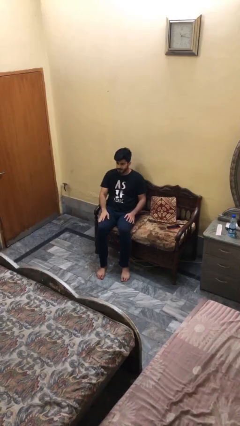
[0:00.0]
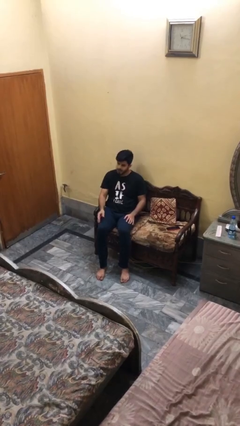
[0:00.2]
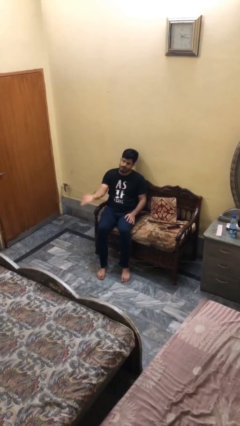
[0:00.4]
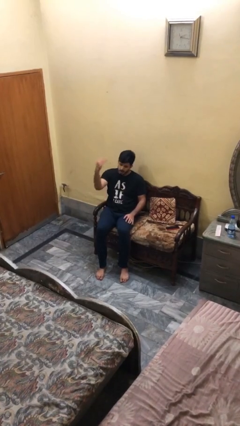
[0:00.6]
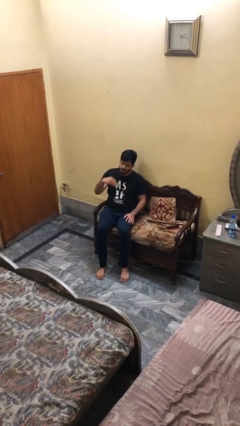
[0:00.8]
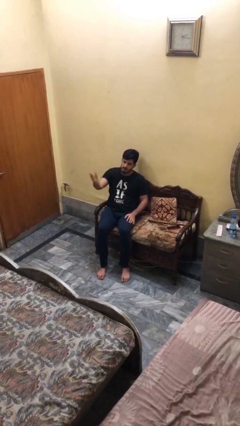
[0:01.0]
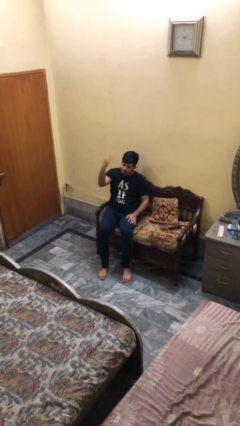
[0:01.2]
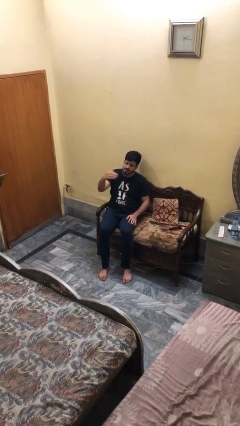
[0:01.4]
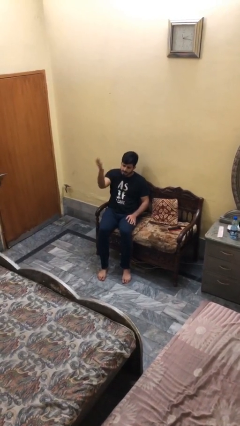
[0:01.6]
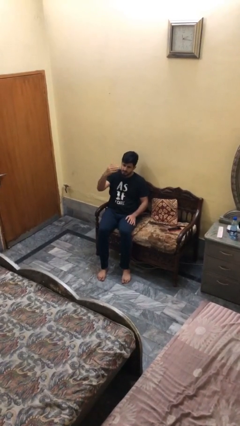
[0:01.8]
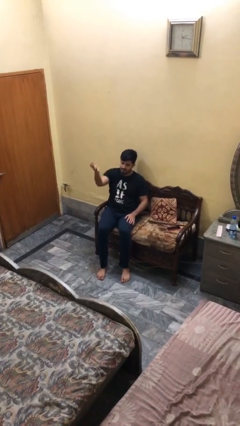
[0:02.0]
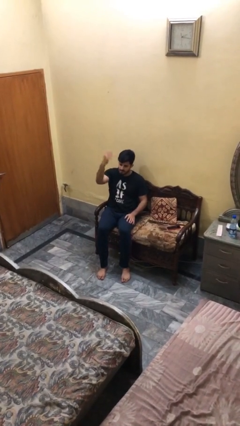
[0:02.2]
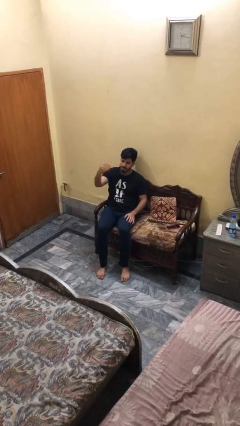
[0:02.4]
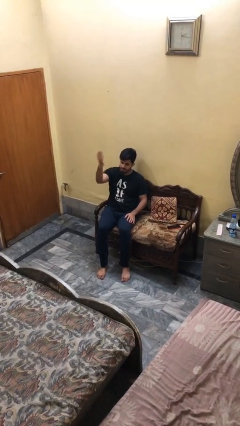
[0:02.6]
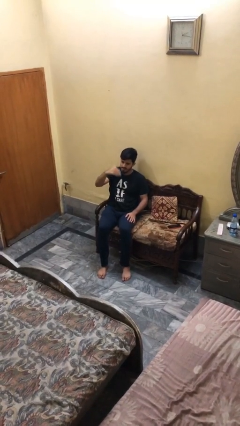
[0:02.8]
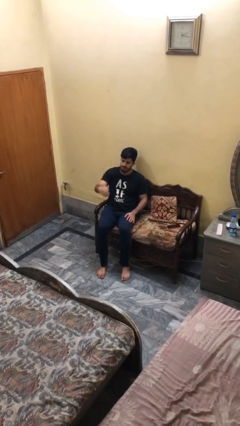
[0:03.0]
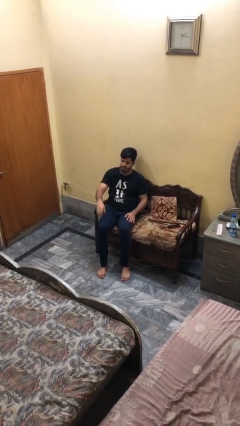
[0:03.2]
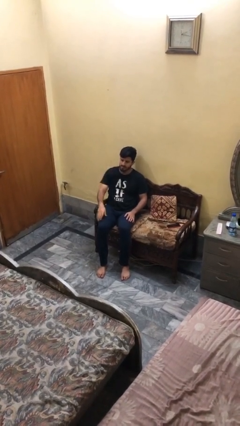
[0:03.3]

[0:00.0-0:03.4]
person gestures come here

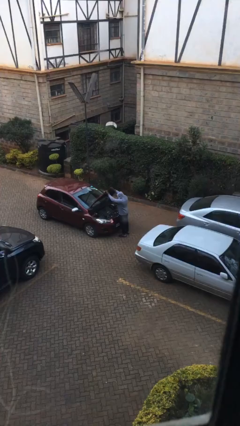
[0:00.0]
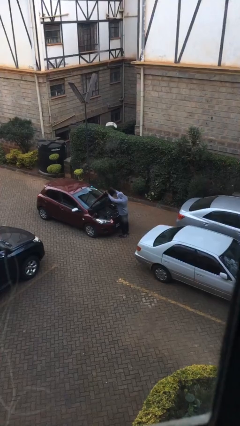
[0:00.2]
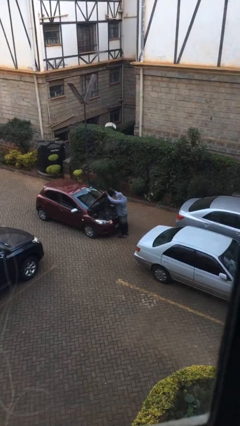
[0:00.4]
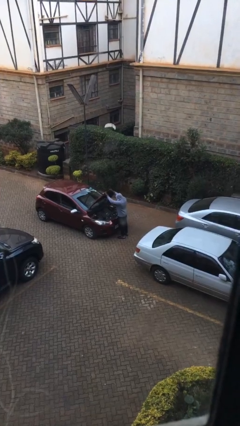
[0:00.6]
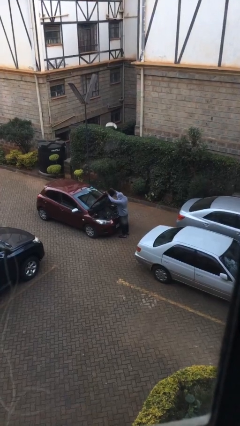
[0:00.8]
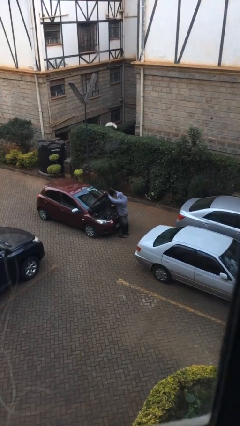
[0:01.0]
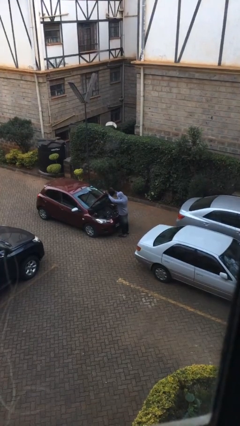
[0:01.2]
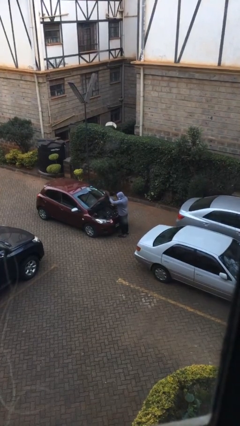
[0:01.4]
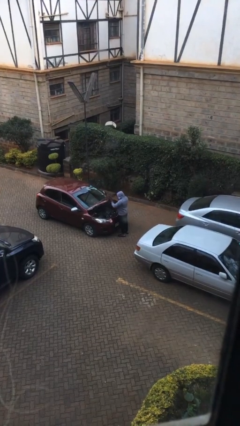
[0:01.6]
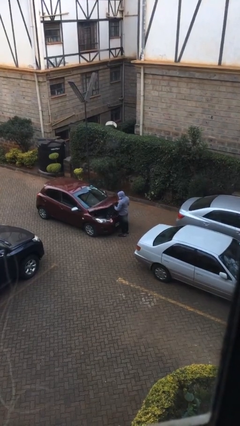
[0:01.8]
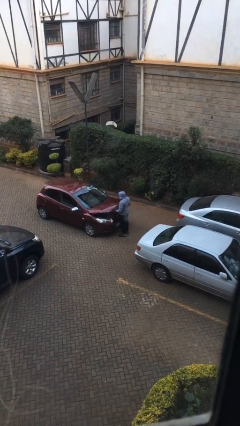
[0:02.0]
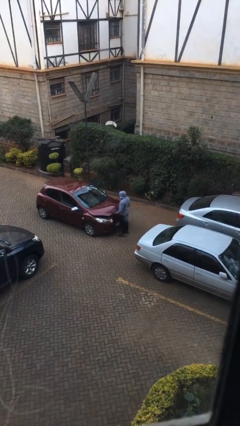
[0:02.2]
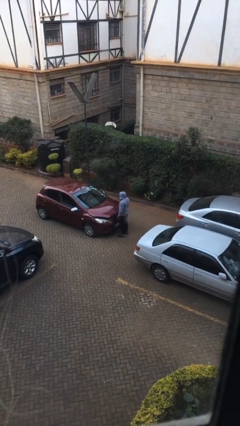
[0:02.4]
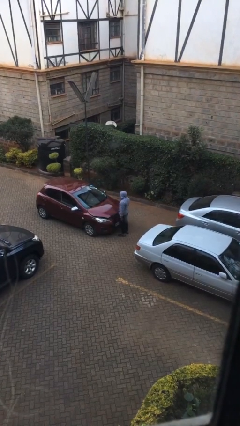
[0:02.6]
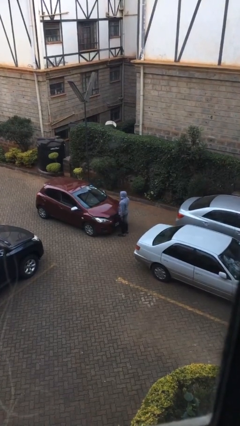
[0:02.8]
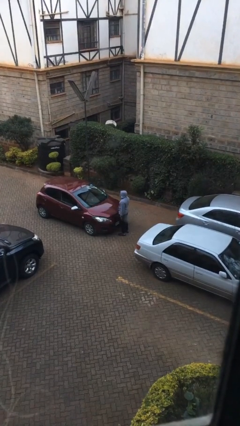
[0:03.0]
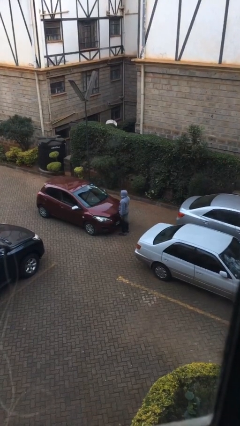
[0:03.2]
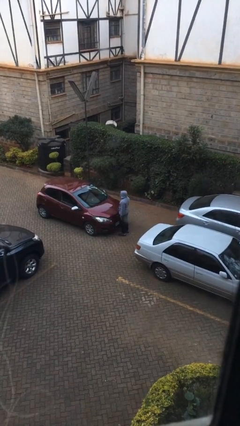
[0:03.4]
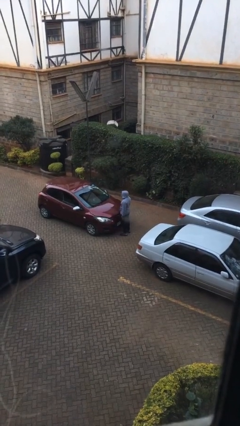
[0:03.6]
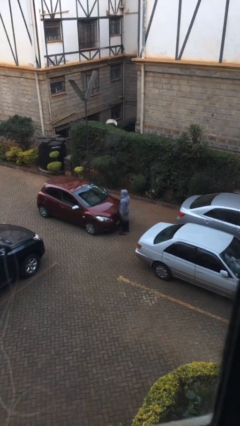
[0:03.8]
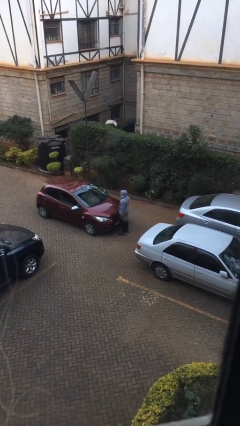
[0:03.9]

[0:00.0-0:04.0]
person closes car hood

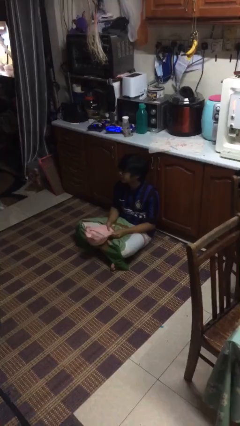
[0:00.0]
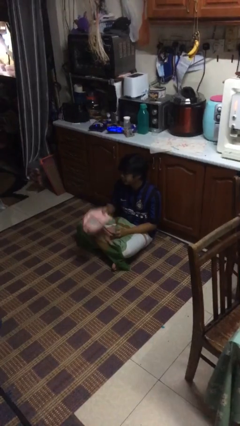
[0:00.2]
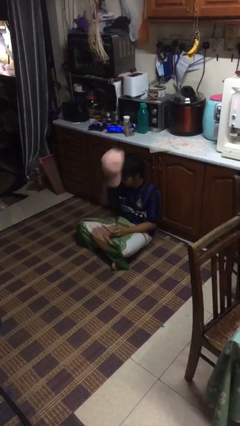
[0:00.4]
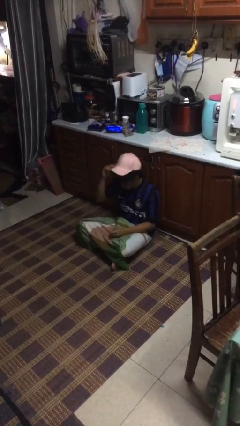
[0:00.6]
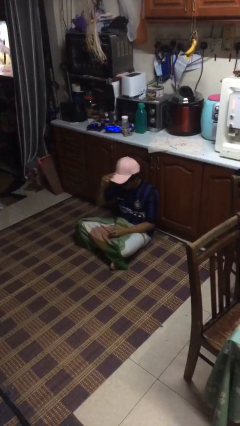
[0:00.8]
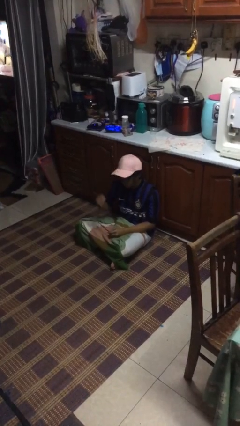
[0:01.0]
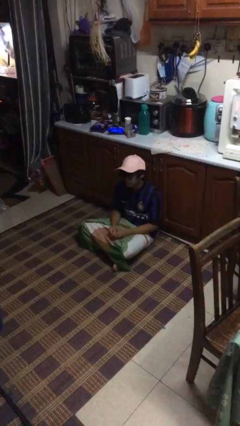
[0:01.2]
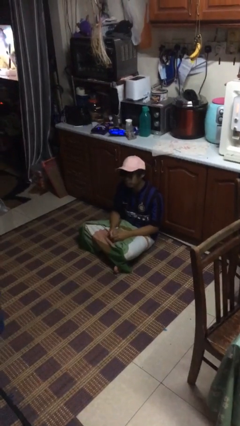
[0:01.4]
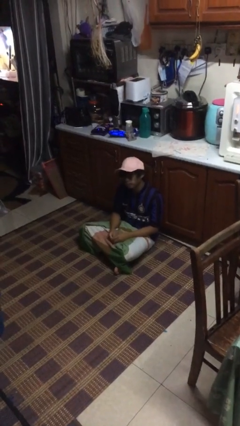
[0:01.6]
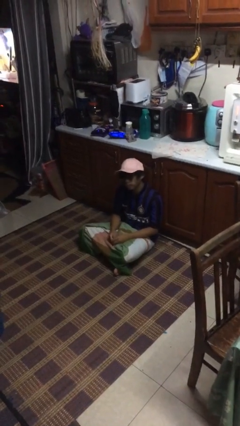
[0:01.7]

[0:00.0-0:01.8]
person puts on hat

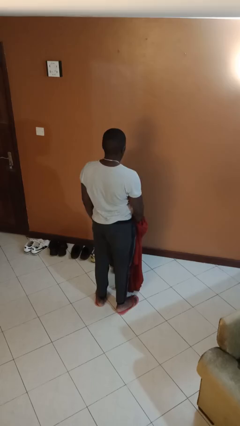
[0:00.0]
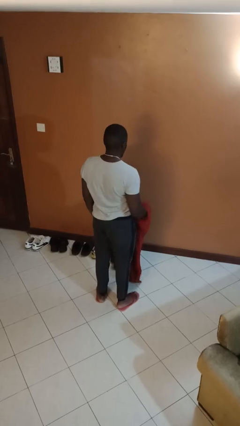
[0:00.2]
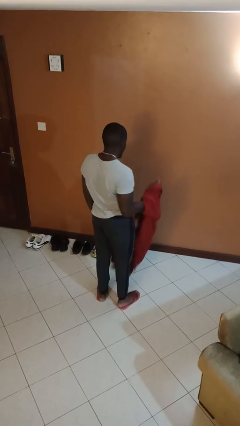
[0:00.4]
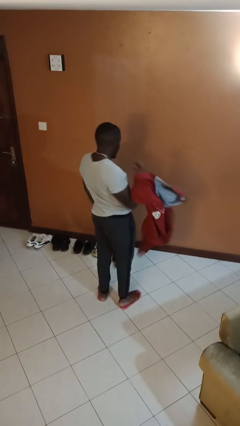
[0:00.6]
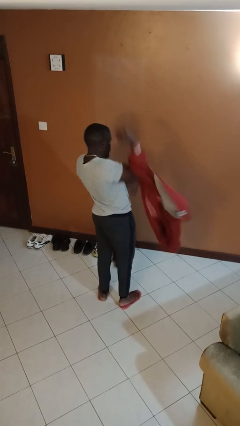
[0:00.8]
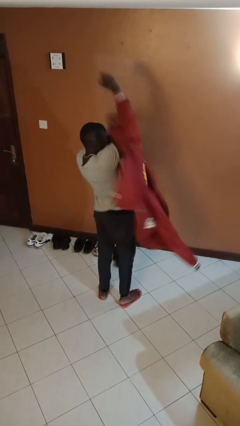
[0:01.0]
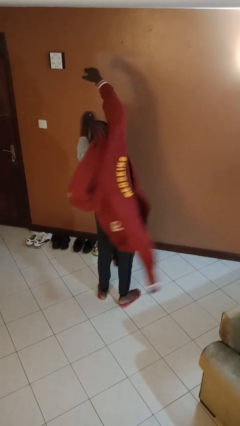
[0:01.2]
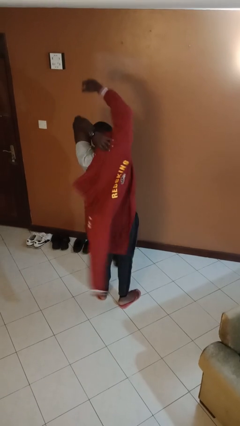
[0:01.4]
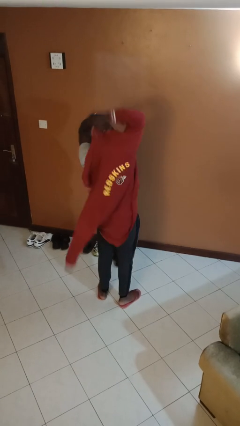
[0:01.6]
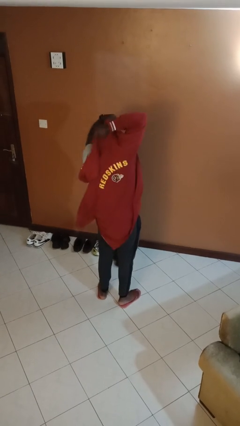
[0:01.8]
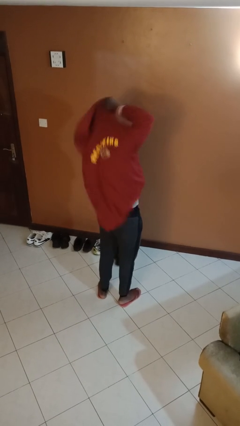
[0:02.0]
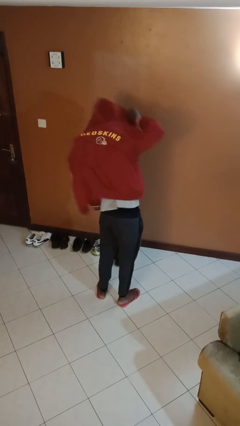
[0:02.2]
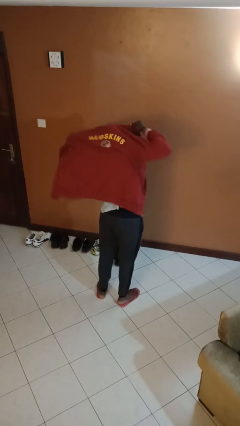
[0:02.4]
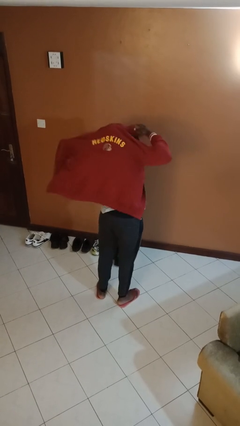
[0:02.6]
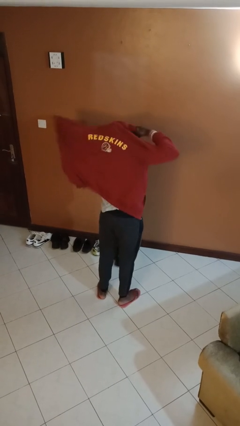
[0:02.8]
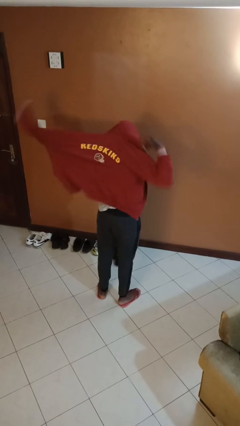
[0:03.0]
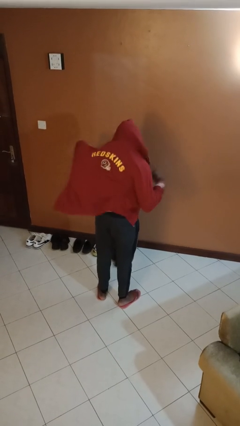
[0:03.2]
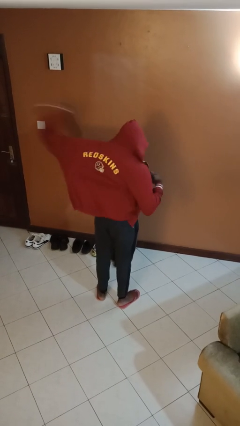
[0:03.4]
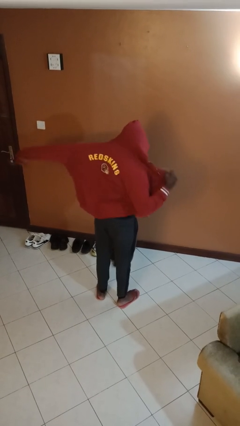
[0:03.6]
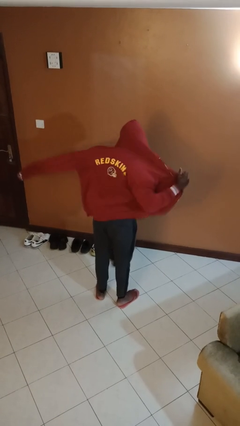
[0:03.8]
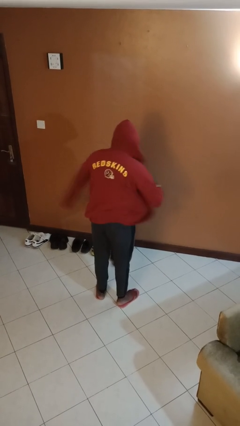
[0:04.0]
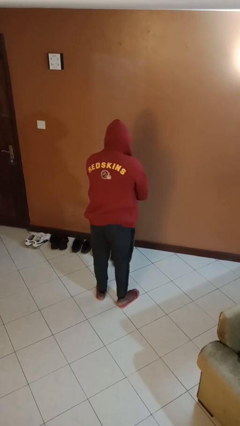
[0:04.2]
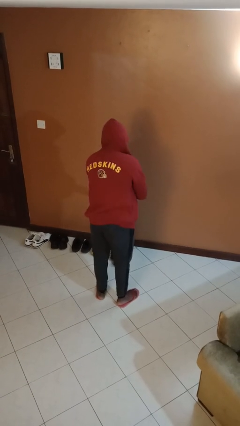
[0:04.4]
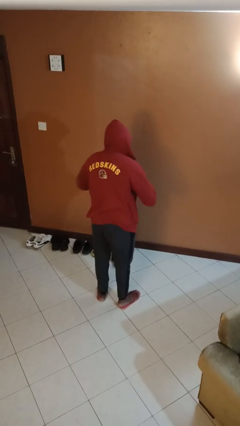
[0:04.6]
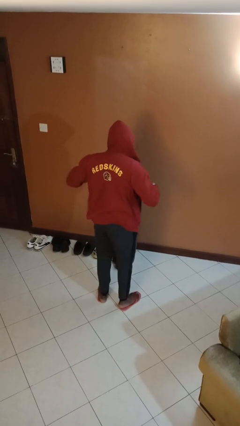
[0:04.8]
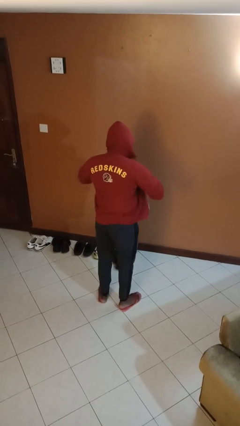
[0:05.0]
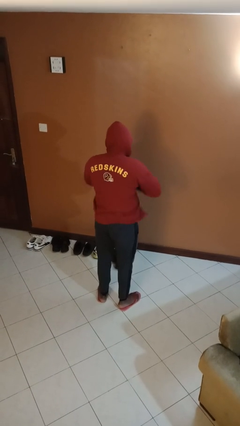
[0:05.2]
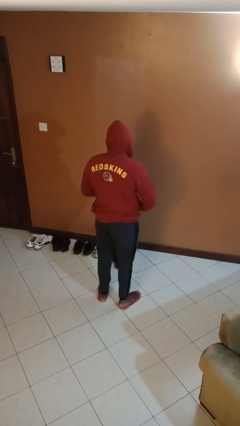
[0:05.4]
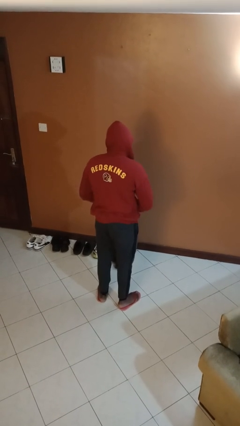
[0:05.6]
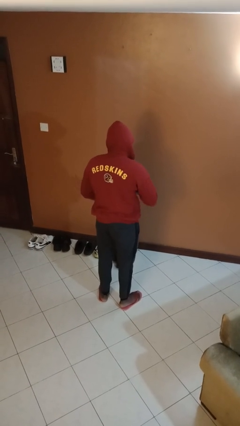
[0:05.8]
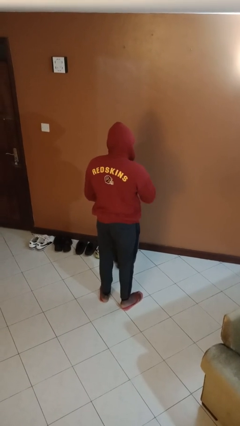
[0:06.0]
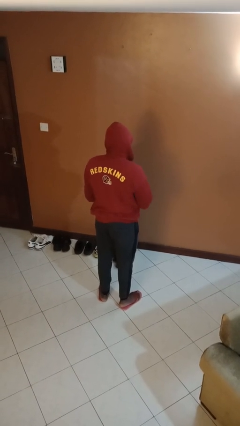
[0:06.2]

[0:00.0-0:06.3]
person puts on hoodie

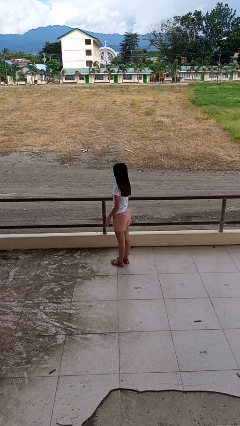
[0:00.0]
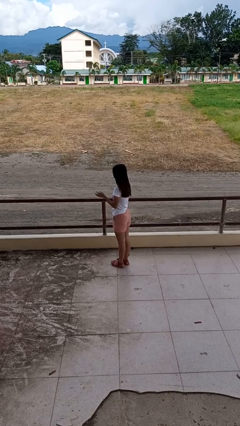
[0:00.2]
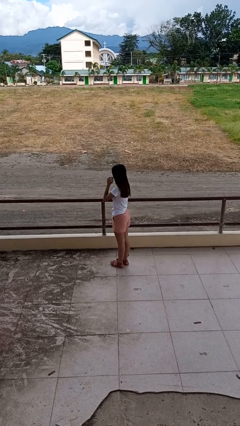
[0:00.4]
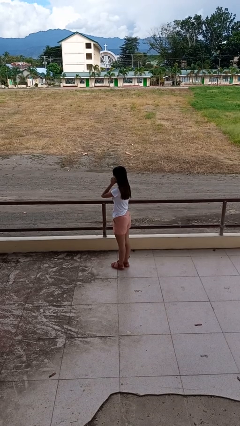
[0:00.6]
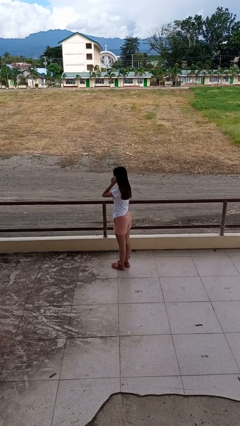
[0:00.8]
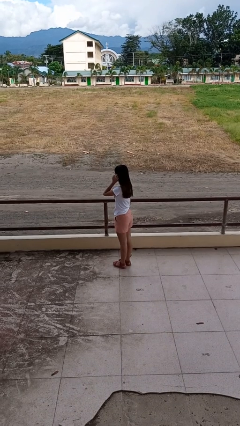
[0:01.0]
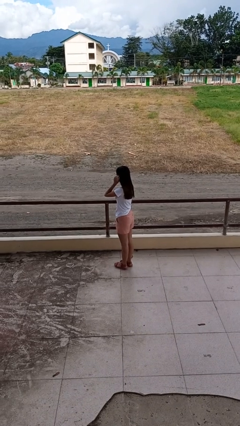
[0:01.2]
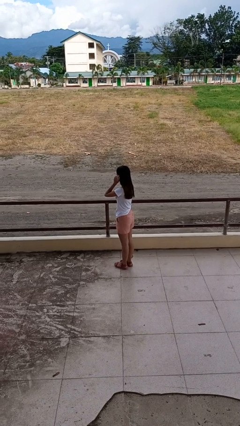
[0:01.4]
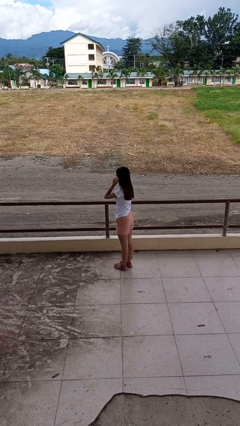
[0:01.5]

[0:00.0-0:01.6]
person touches earlobe

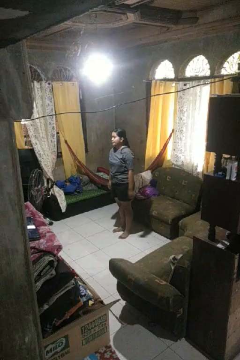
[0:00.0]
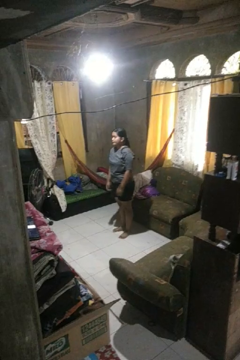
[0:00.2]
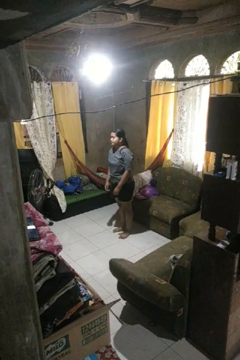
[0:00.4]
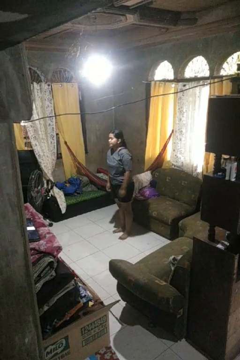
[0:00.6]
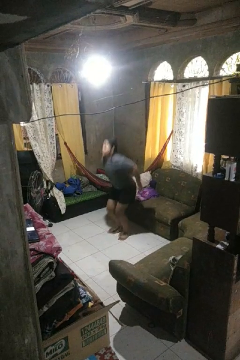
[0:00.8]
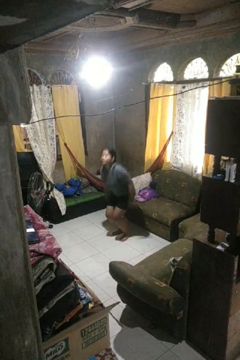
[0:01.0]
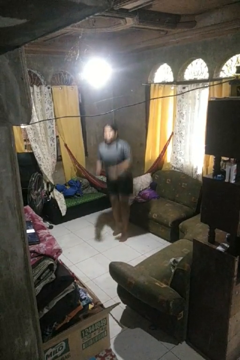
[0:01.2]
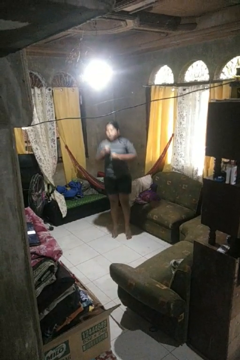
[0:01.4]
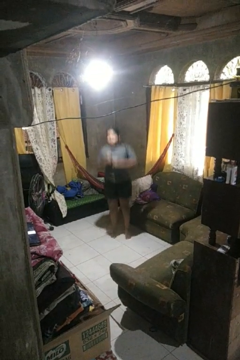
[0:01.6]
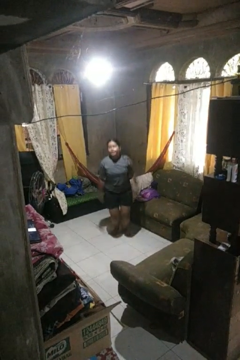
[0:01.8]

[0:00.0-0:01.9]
person jumps
